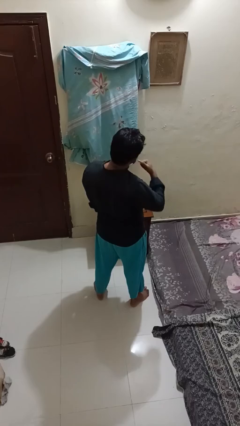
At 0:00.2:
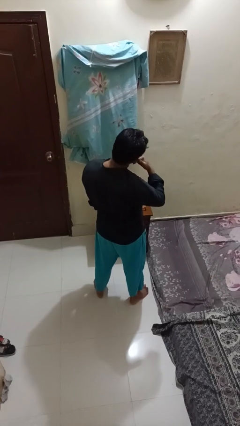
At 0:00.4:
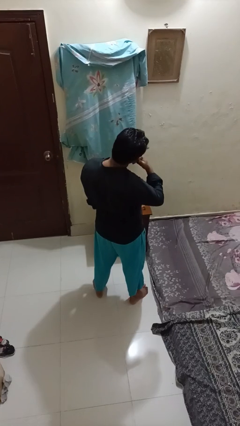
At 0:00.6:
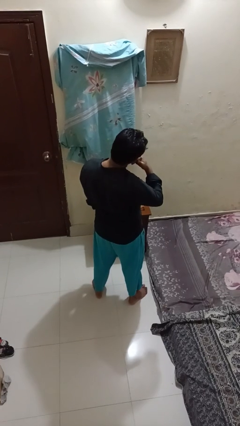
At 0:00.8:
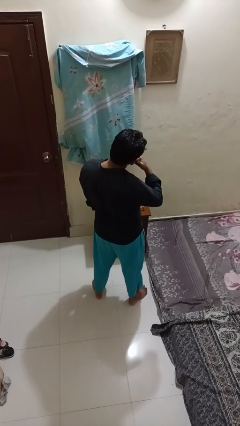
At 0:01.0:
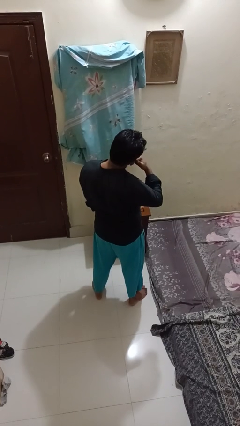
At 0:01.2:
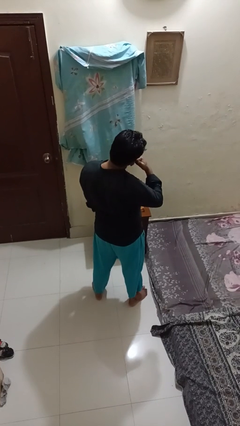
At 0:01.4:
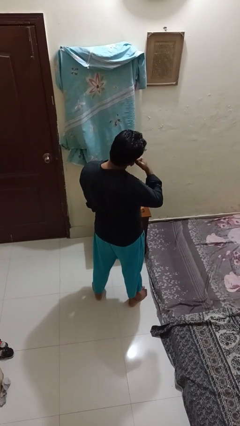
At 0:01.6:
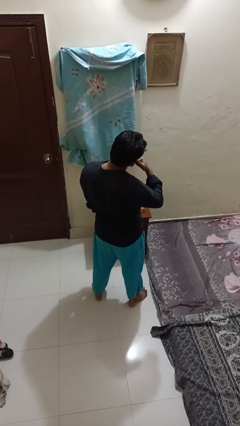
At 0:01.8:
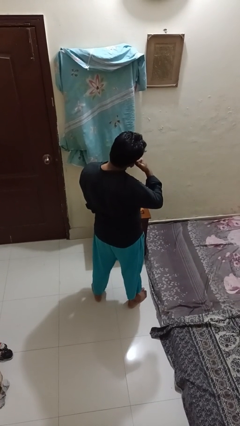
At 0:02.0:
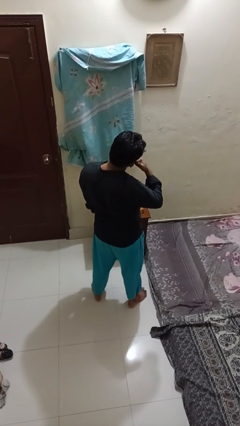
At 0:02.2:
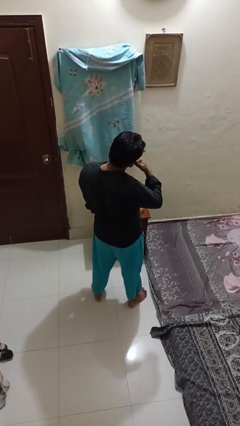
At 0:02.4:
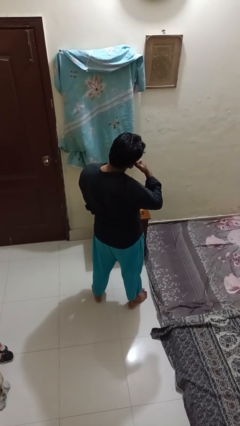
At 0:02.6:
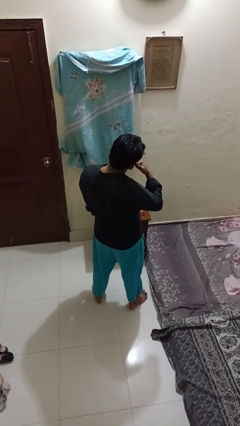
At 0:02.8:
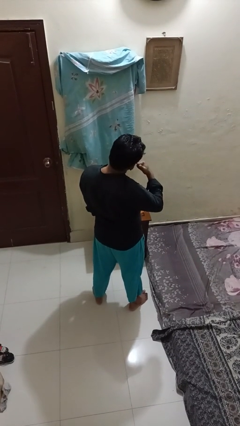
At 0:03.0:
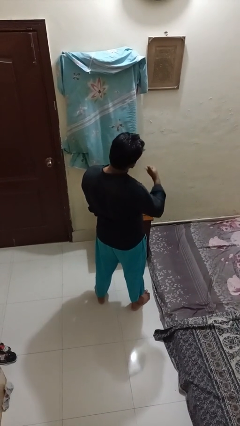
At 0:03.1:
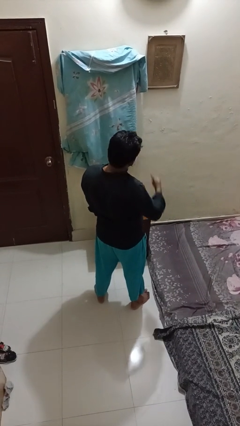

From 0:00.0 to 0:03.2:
person gestures call me

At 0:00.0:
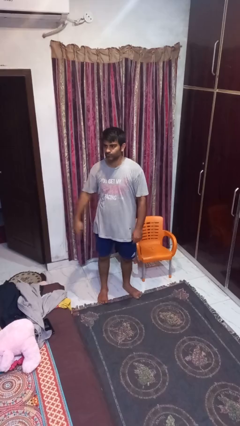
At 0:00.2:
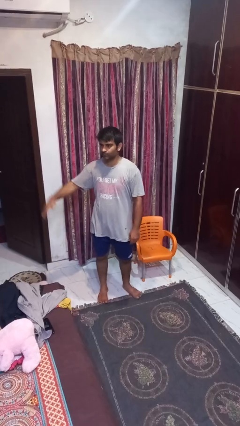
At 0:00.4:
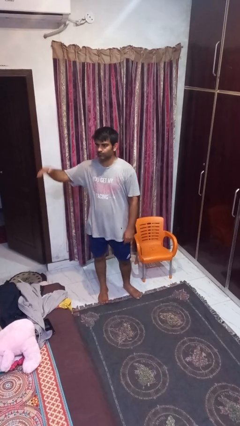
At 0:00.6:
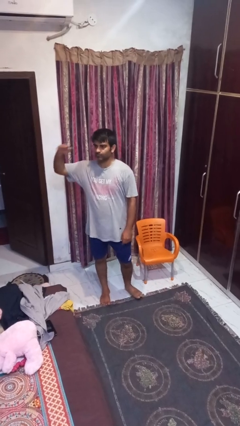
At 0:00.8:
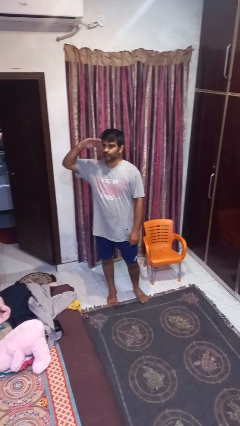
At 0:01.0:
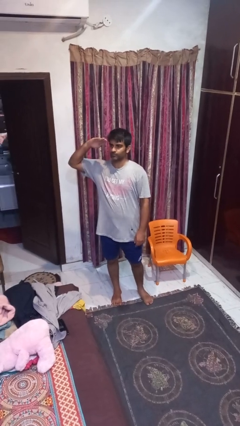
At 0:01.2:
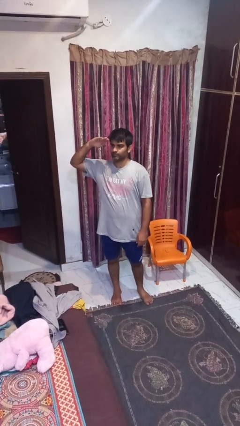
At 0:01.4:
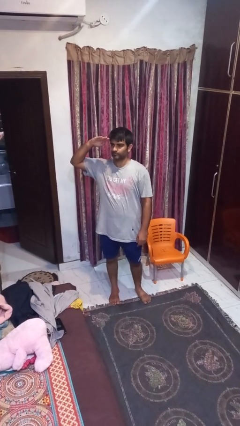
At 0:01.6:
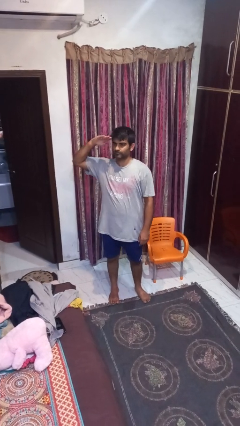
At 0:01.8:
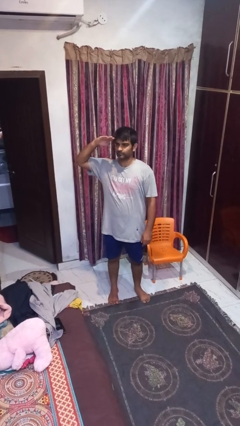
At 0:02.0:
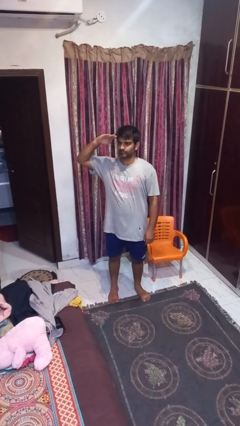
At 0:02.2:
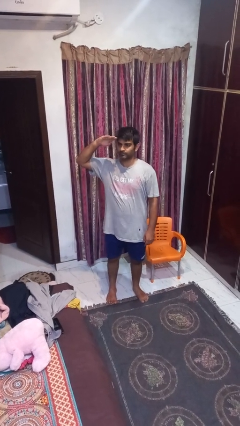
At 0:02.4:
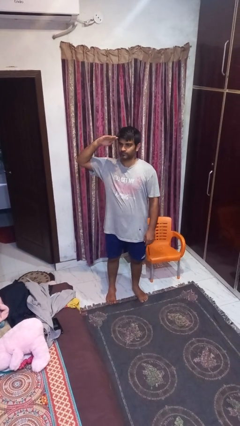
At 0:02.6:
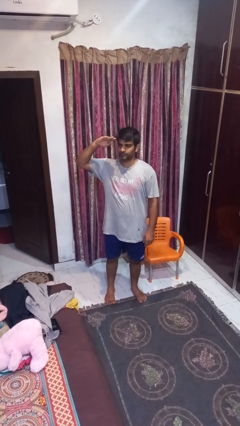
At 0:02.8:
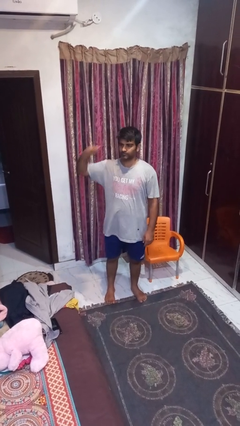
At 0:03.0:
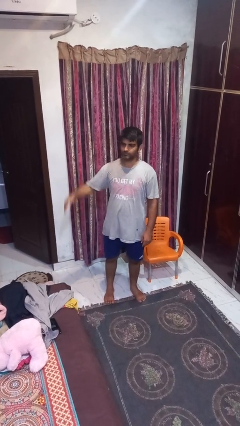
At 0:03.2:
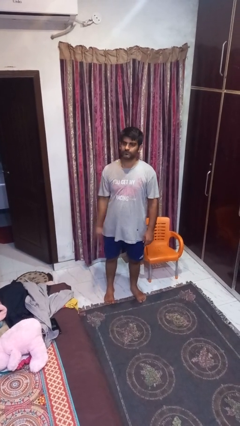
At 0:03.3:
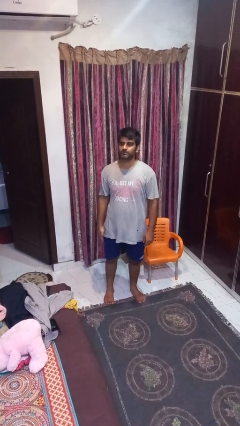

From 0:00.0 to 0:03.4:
person salutes

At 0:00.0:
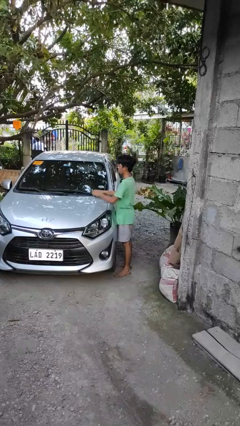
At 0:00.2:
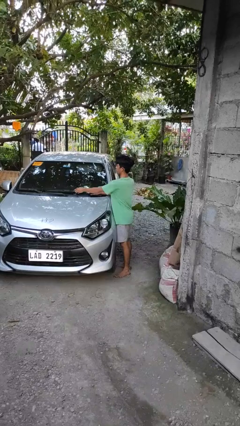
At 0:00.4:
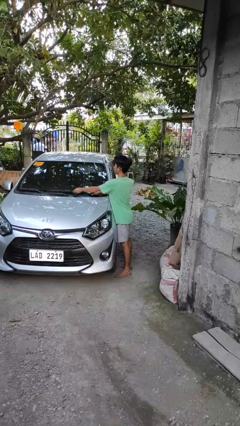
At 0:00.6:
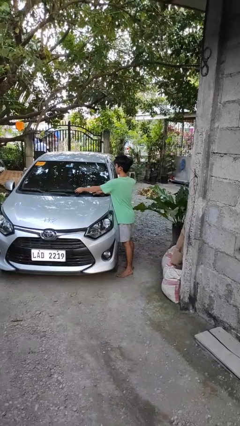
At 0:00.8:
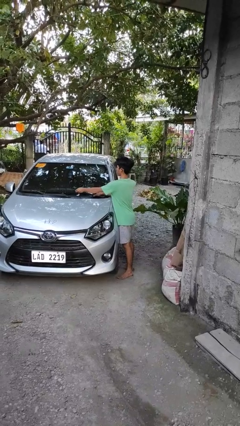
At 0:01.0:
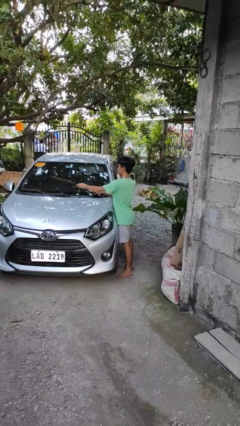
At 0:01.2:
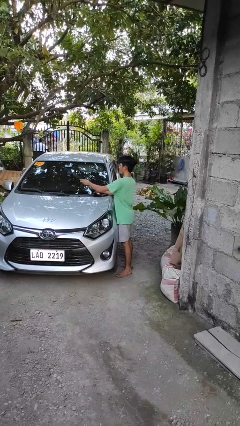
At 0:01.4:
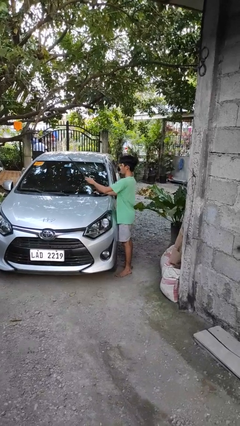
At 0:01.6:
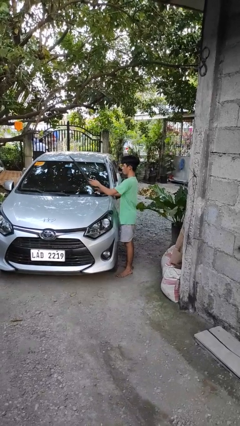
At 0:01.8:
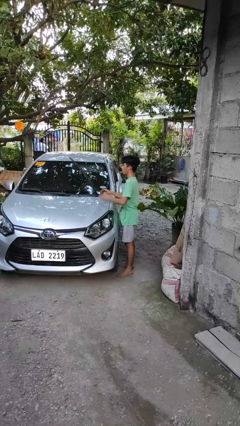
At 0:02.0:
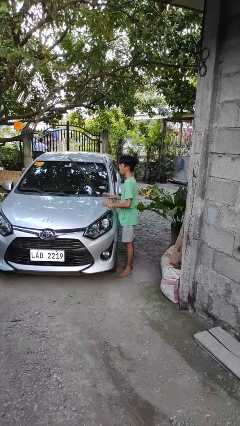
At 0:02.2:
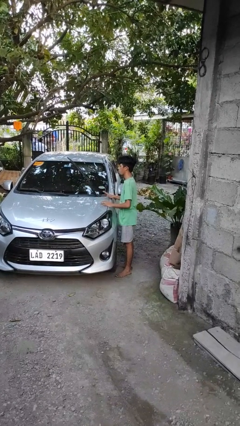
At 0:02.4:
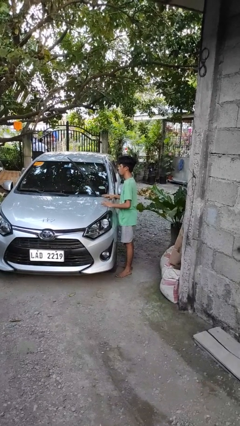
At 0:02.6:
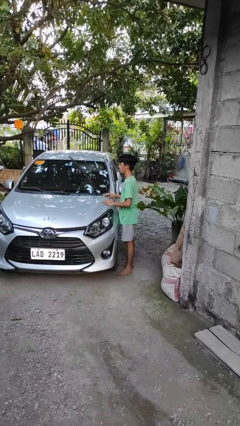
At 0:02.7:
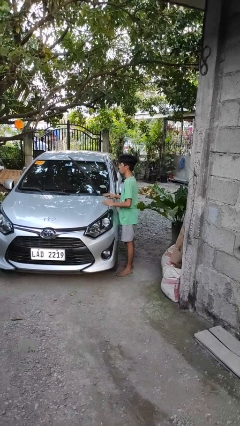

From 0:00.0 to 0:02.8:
person flips up car wipers

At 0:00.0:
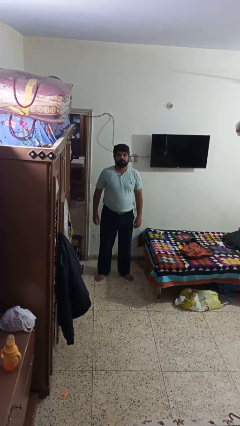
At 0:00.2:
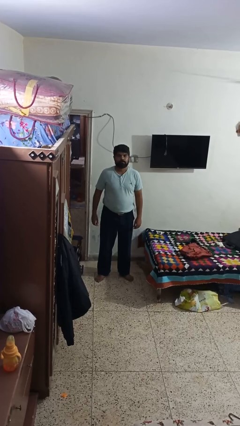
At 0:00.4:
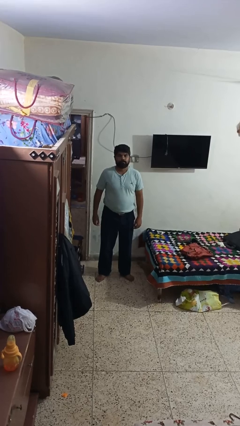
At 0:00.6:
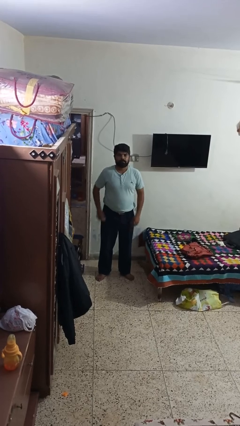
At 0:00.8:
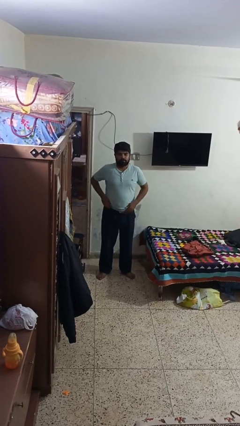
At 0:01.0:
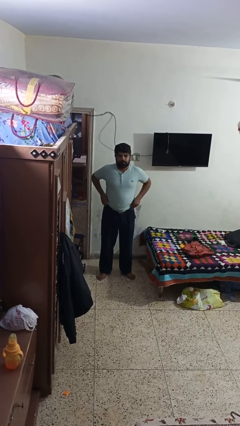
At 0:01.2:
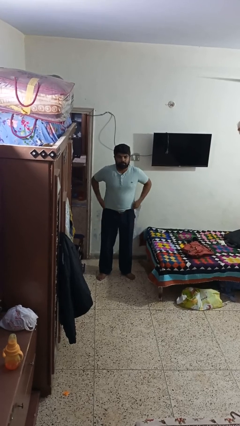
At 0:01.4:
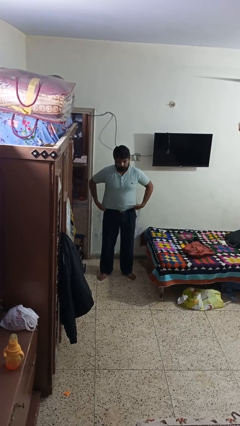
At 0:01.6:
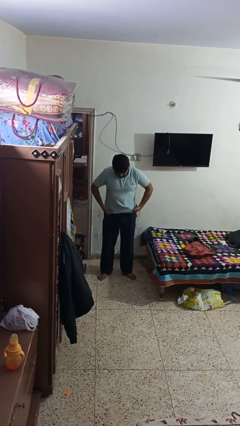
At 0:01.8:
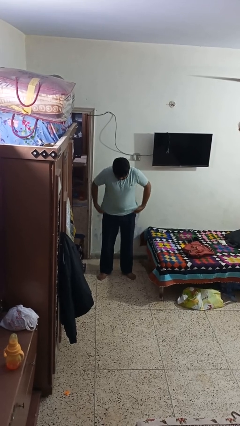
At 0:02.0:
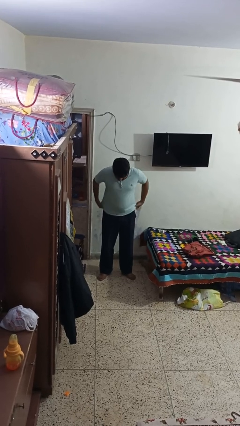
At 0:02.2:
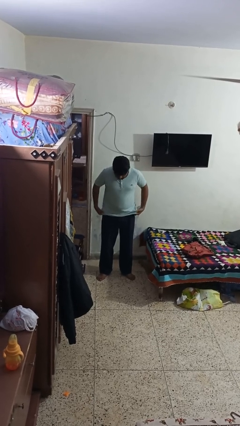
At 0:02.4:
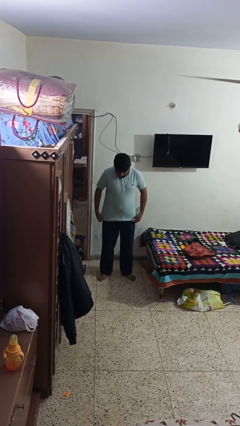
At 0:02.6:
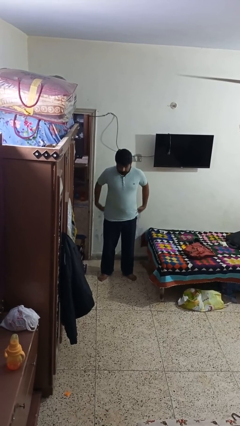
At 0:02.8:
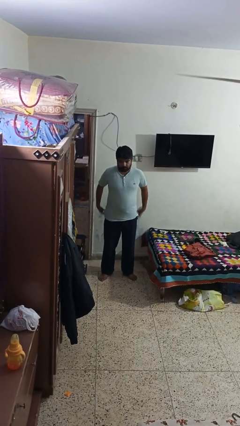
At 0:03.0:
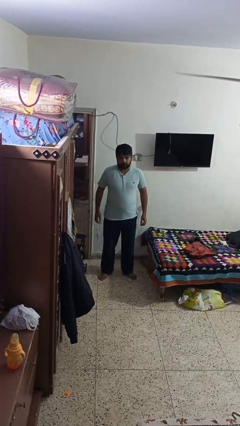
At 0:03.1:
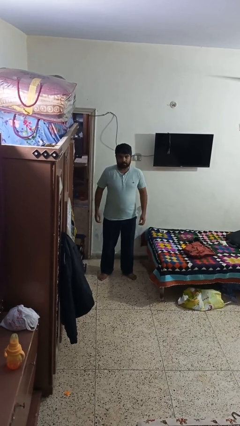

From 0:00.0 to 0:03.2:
person untucks shirt

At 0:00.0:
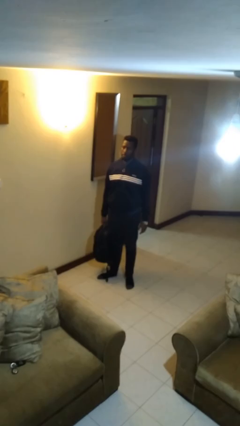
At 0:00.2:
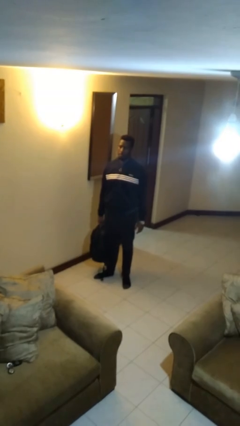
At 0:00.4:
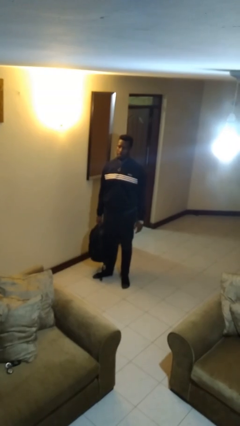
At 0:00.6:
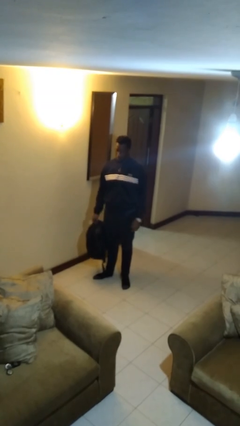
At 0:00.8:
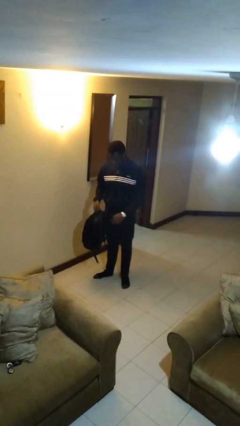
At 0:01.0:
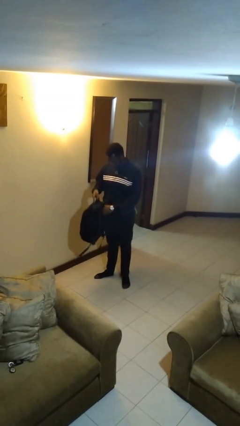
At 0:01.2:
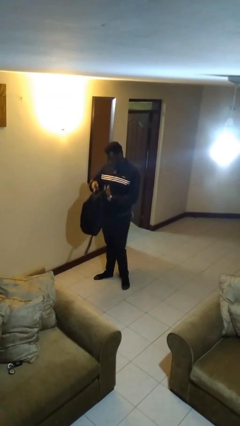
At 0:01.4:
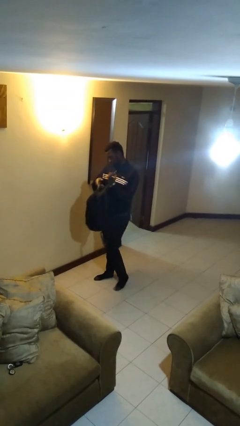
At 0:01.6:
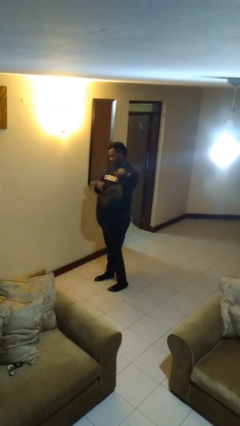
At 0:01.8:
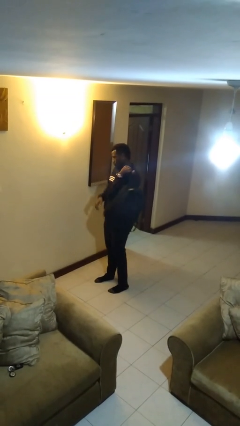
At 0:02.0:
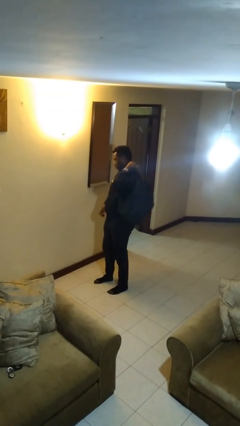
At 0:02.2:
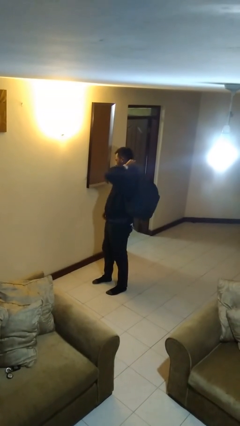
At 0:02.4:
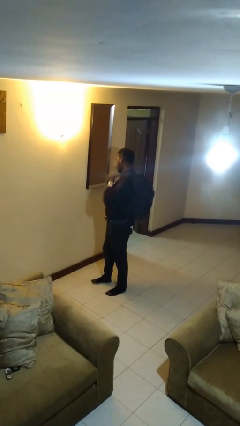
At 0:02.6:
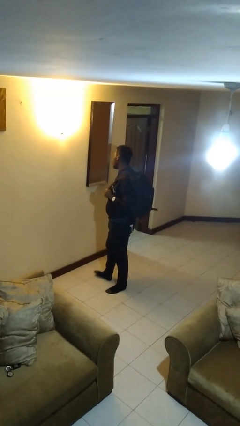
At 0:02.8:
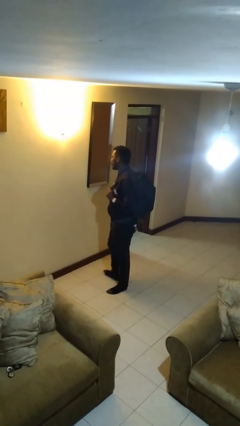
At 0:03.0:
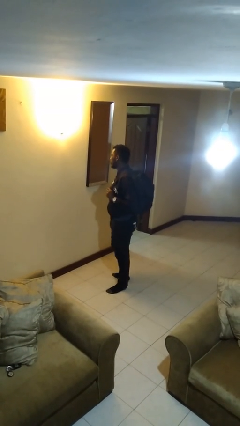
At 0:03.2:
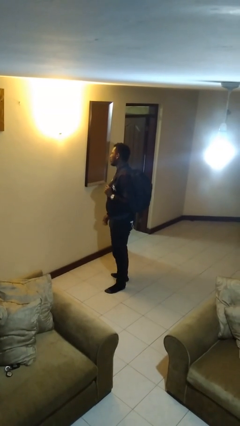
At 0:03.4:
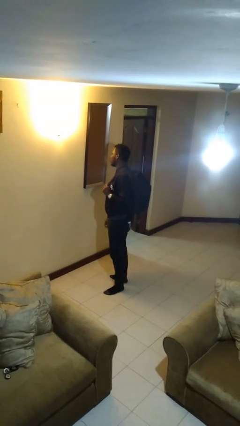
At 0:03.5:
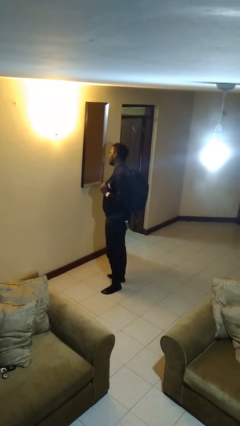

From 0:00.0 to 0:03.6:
person puts on backpack

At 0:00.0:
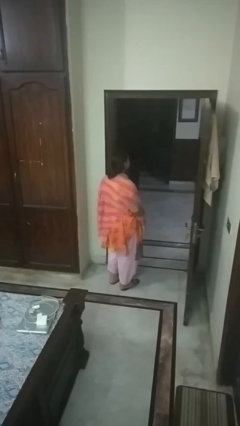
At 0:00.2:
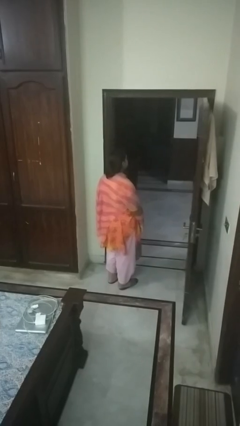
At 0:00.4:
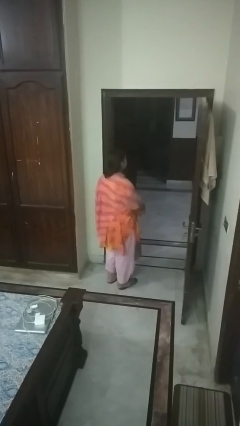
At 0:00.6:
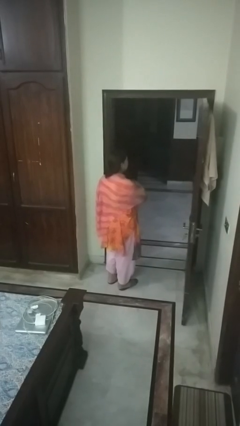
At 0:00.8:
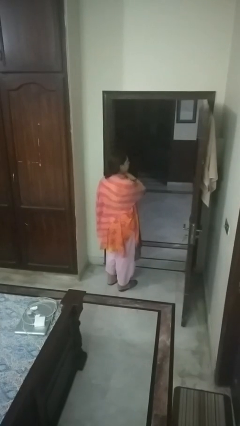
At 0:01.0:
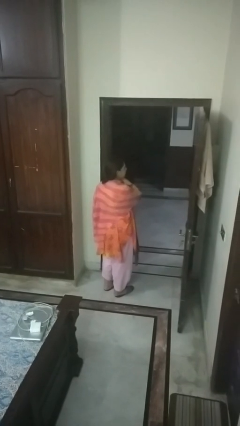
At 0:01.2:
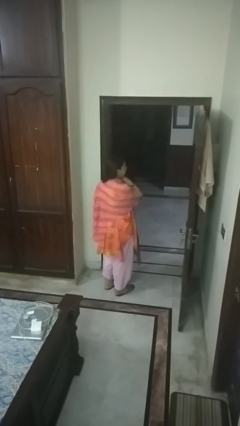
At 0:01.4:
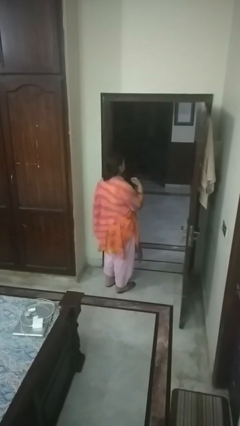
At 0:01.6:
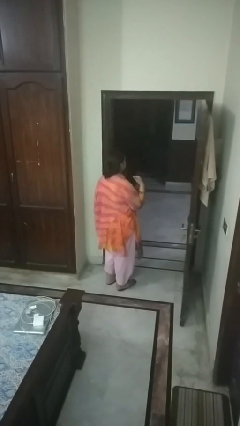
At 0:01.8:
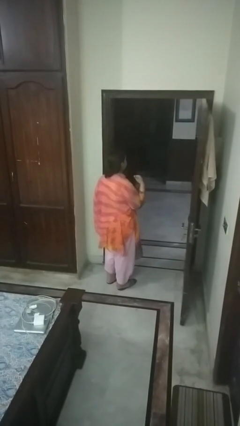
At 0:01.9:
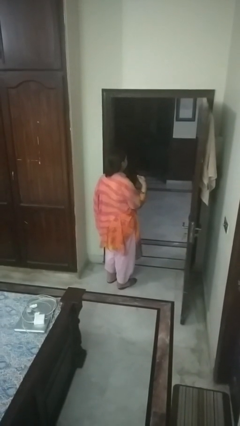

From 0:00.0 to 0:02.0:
person gestures cut
